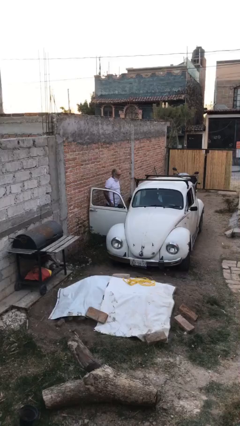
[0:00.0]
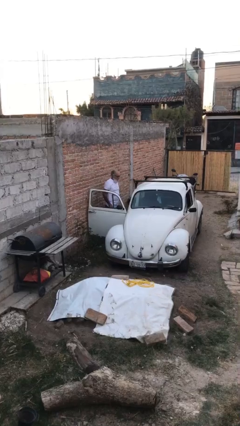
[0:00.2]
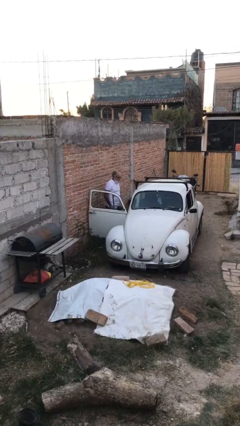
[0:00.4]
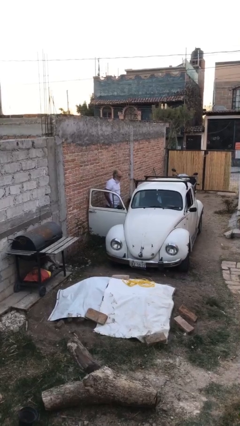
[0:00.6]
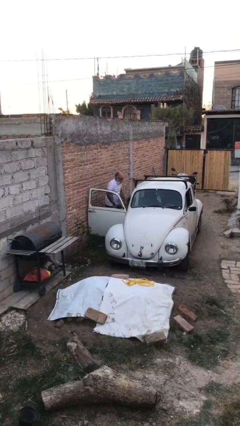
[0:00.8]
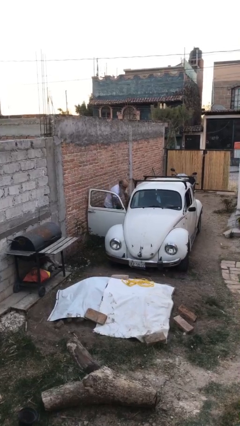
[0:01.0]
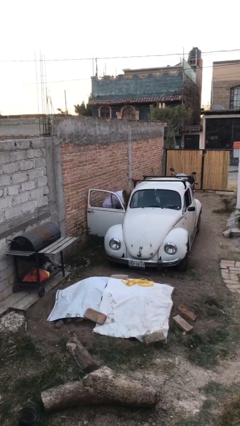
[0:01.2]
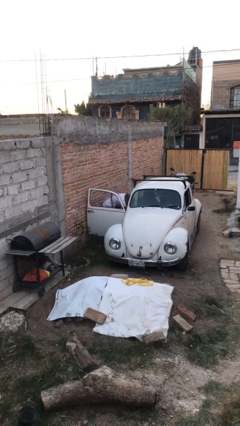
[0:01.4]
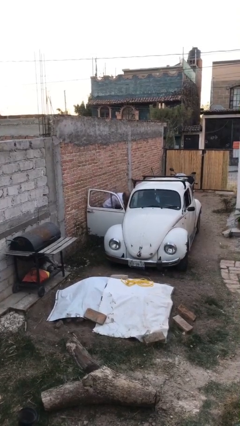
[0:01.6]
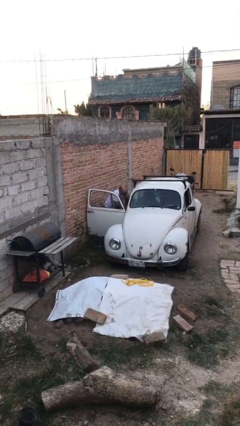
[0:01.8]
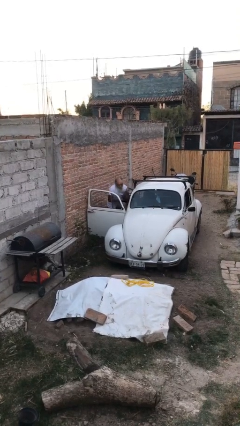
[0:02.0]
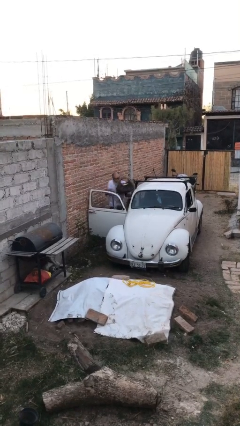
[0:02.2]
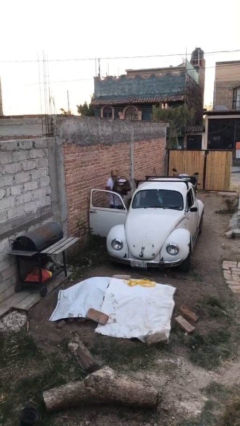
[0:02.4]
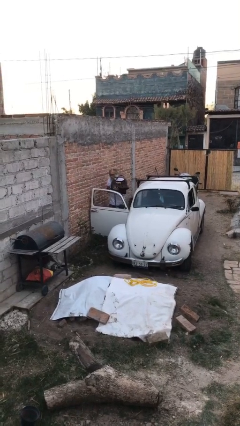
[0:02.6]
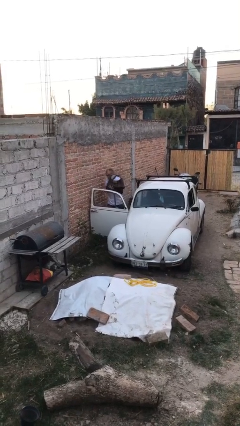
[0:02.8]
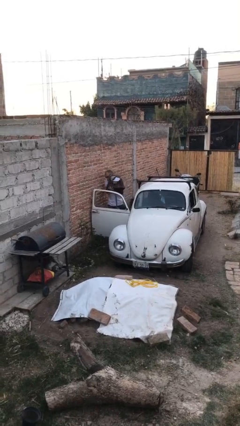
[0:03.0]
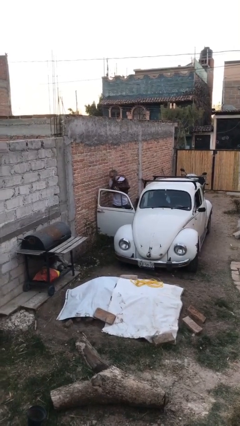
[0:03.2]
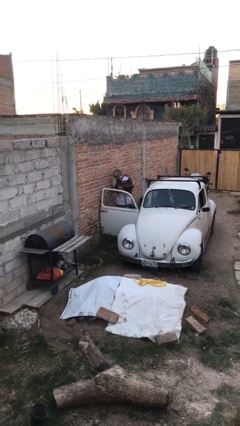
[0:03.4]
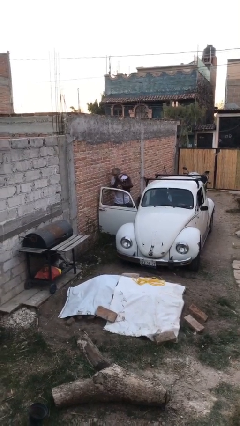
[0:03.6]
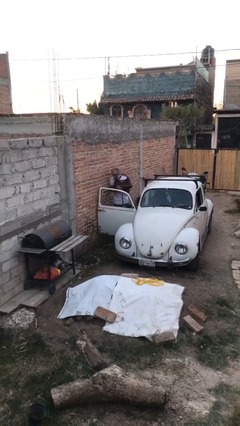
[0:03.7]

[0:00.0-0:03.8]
person unloads car

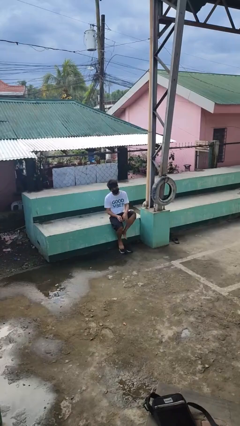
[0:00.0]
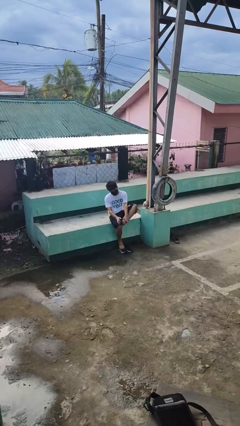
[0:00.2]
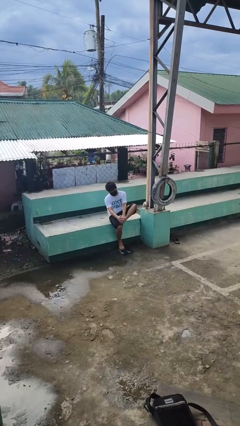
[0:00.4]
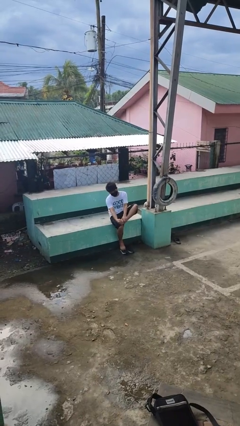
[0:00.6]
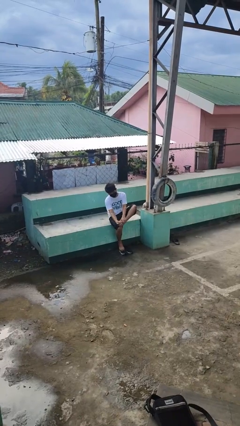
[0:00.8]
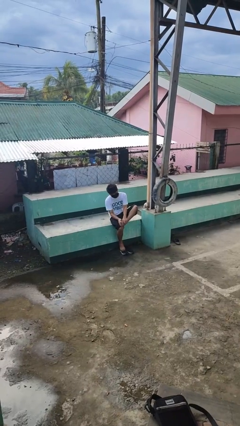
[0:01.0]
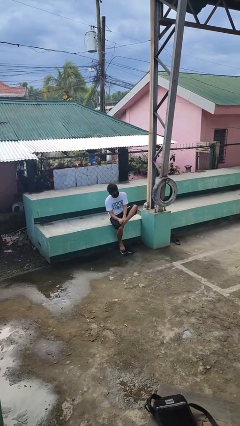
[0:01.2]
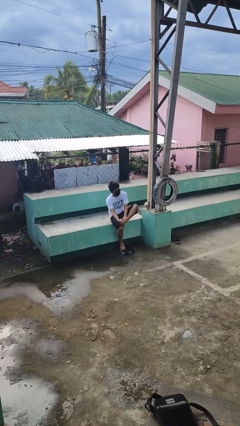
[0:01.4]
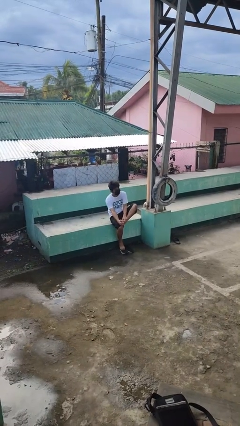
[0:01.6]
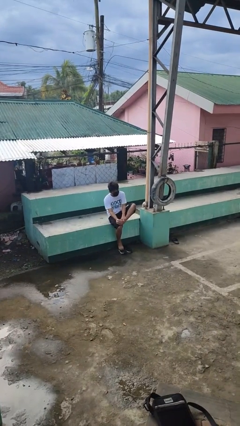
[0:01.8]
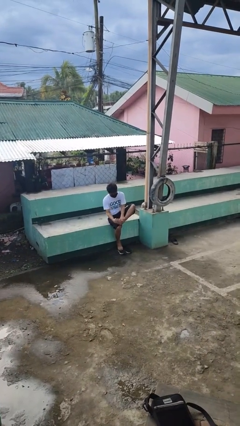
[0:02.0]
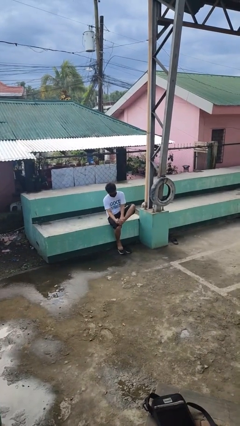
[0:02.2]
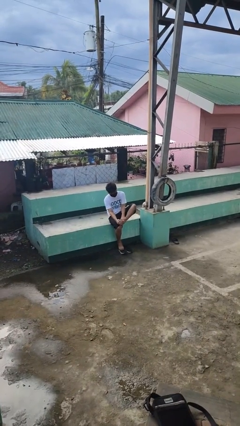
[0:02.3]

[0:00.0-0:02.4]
person rubs foot

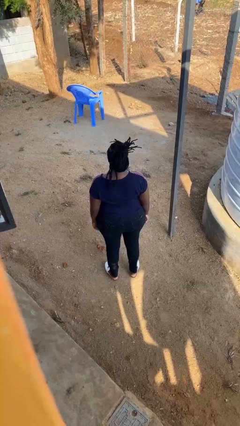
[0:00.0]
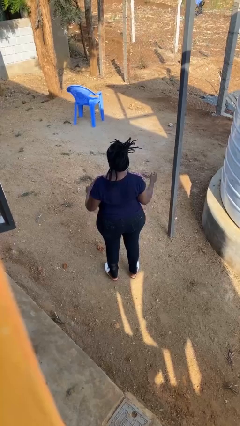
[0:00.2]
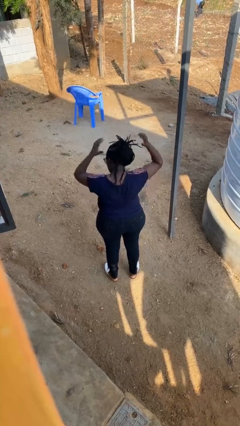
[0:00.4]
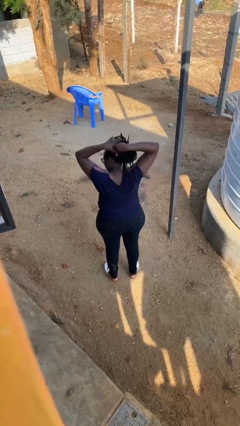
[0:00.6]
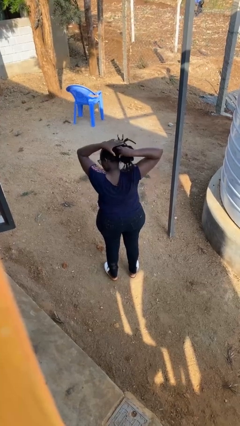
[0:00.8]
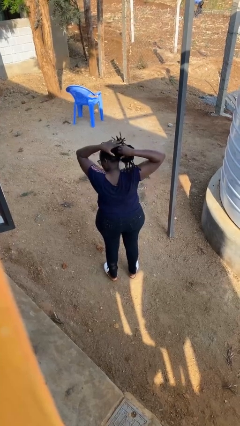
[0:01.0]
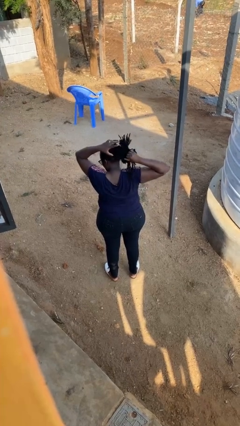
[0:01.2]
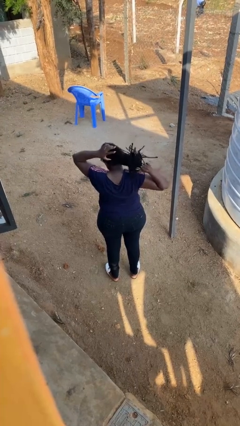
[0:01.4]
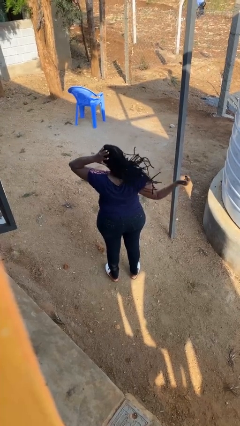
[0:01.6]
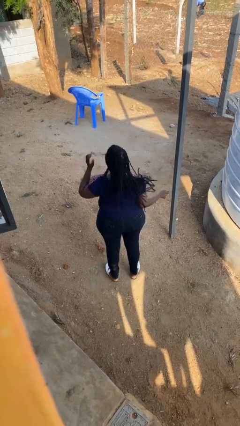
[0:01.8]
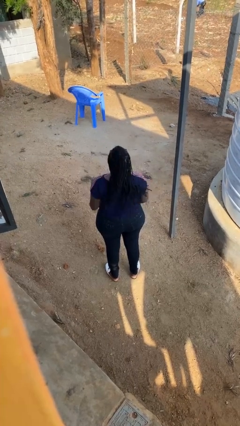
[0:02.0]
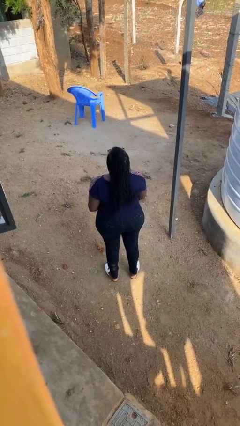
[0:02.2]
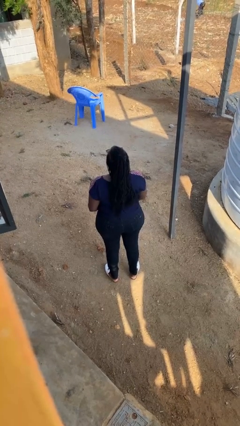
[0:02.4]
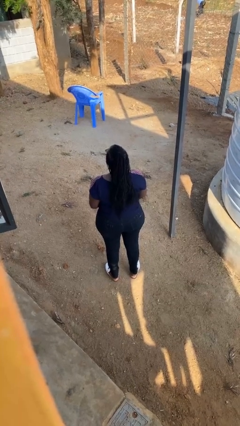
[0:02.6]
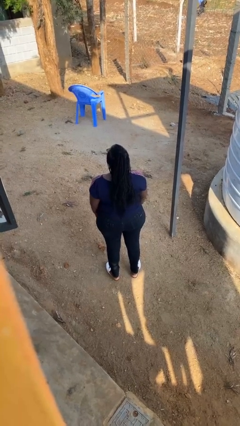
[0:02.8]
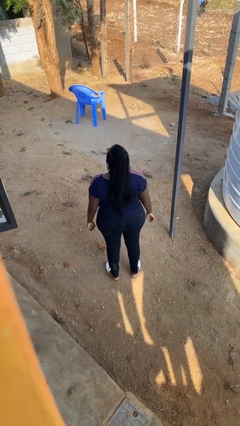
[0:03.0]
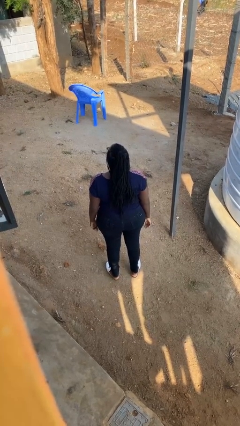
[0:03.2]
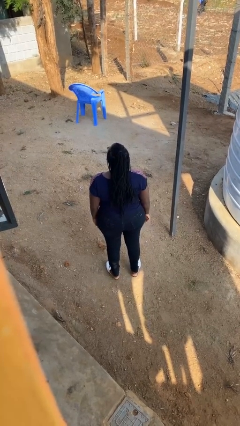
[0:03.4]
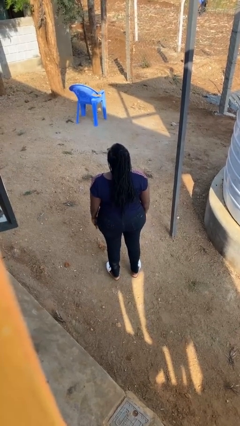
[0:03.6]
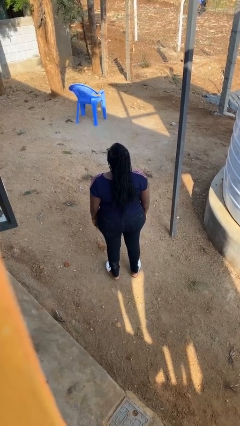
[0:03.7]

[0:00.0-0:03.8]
person takes off hairtie

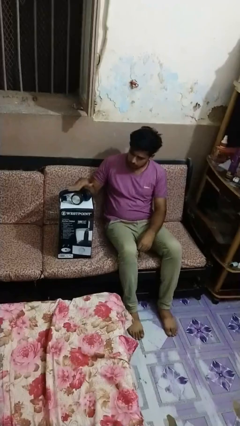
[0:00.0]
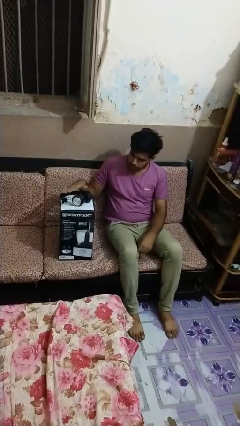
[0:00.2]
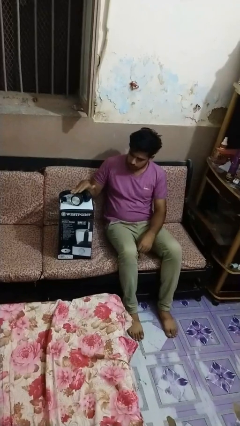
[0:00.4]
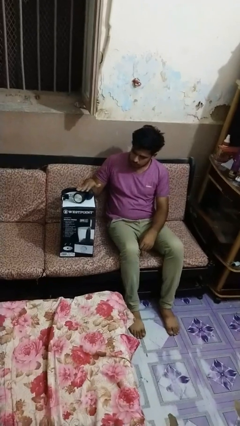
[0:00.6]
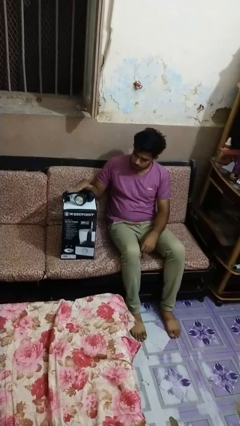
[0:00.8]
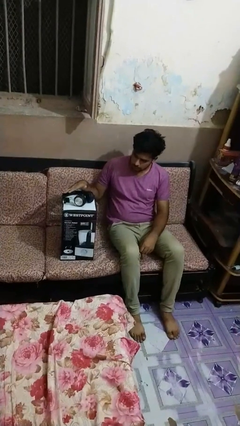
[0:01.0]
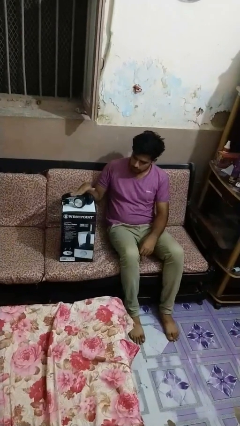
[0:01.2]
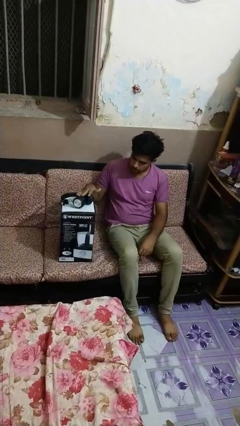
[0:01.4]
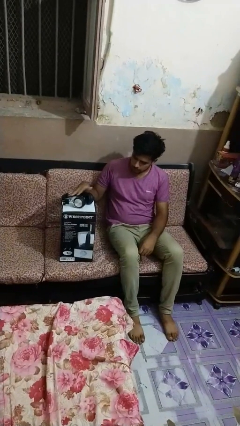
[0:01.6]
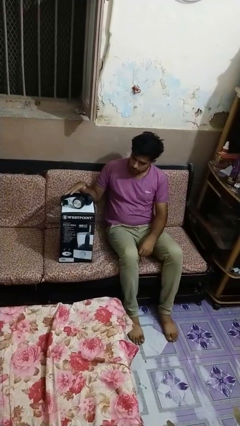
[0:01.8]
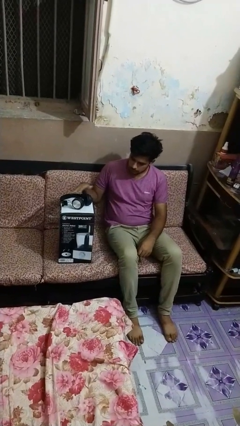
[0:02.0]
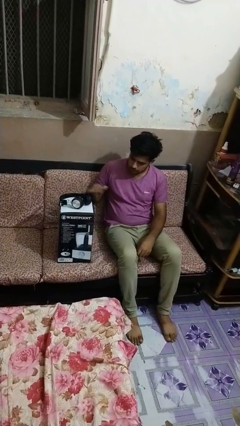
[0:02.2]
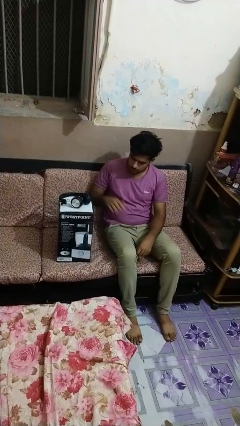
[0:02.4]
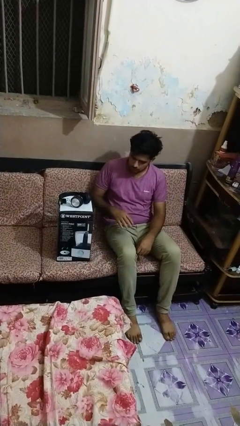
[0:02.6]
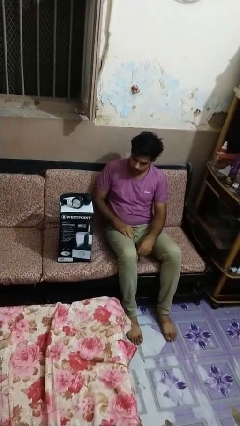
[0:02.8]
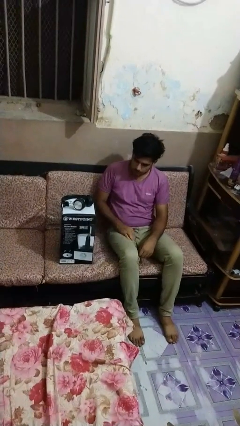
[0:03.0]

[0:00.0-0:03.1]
person waves hand over object

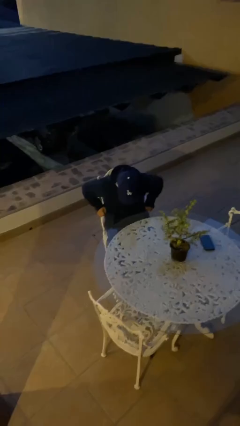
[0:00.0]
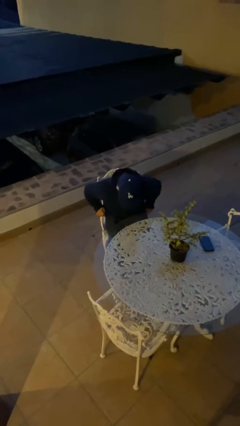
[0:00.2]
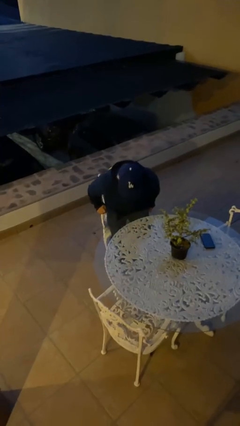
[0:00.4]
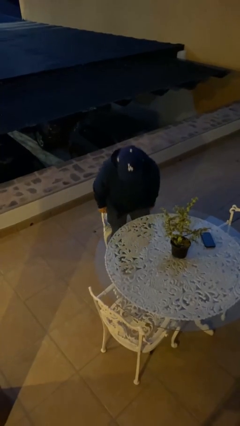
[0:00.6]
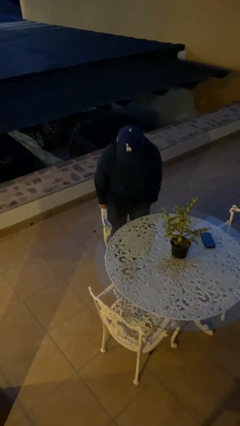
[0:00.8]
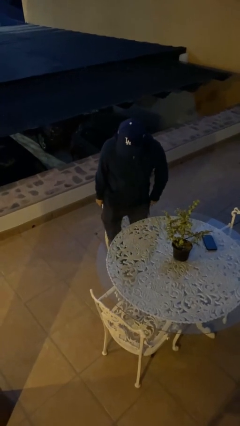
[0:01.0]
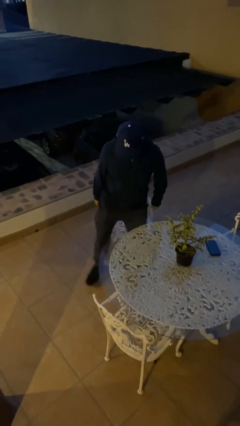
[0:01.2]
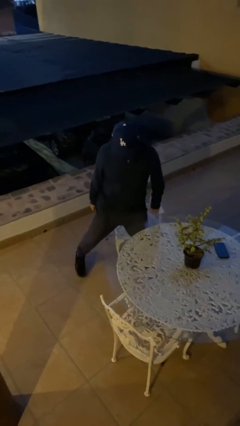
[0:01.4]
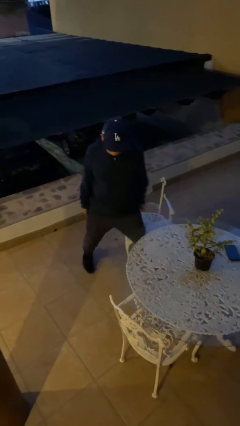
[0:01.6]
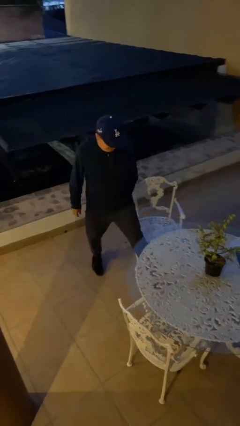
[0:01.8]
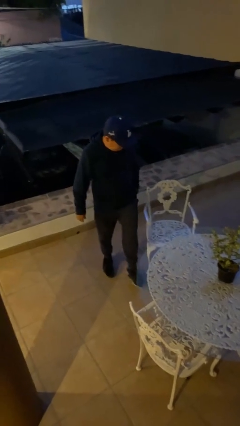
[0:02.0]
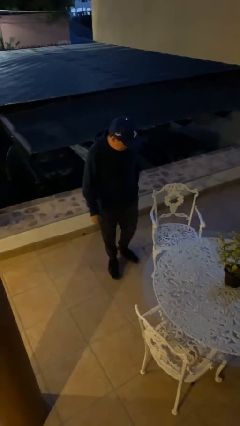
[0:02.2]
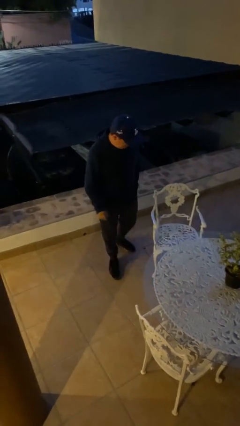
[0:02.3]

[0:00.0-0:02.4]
person stands up

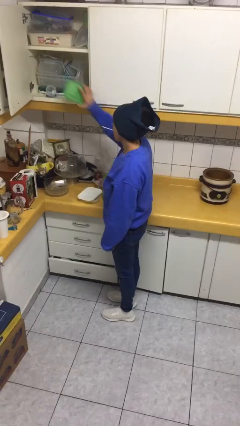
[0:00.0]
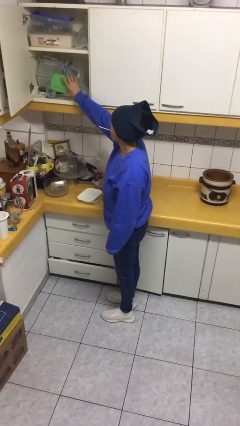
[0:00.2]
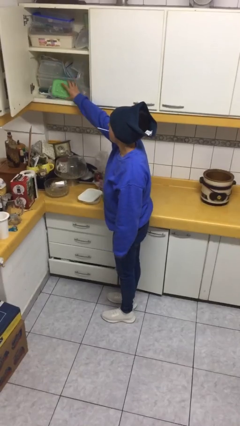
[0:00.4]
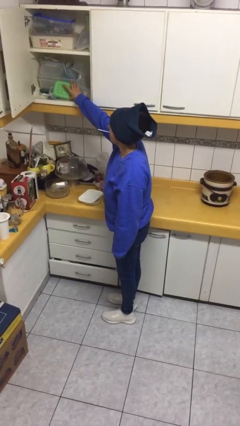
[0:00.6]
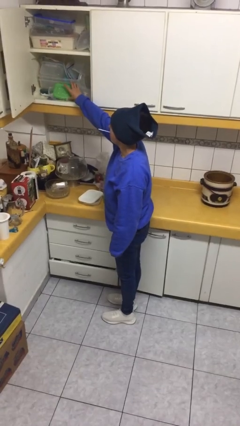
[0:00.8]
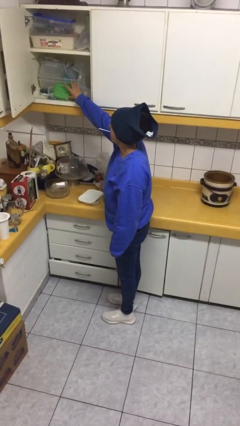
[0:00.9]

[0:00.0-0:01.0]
person puts object in cabinet

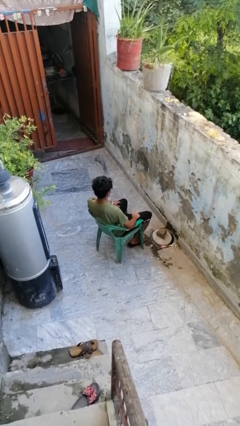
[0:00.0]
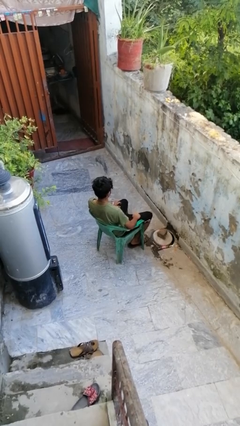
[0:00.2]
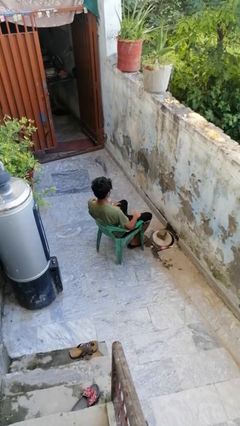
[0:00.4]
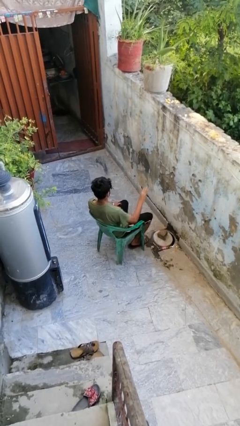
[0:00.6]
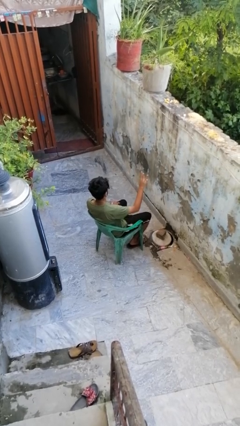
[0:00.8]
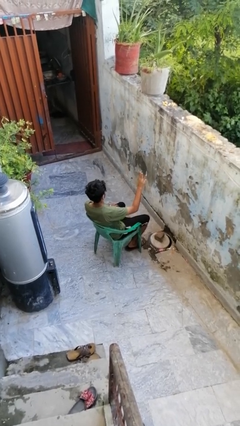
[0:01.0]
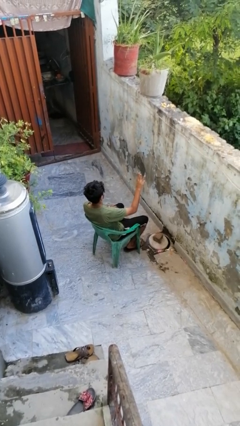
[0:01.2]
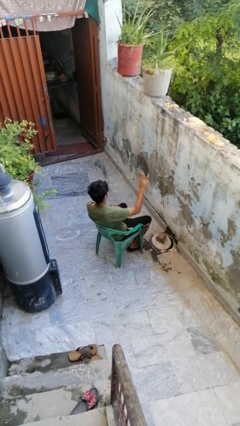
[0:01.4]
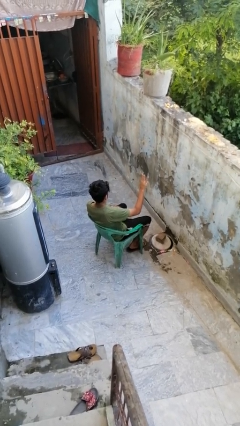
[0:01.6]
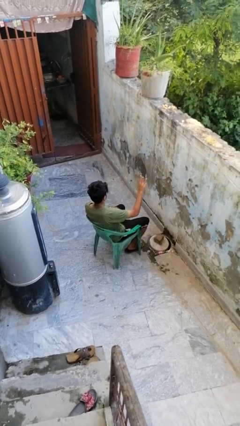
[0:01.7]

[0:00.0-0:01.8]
person gestures number three
